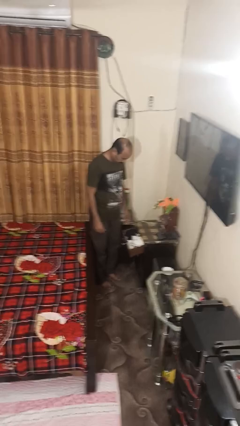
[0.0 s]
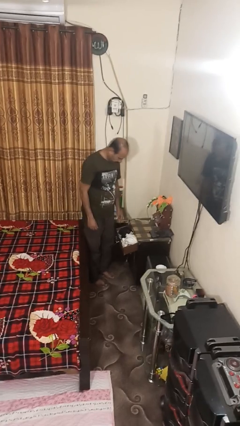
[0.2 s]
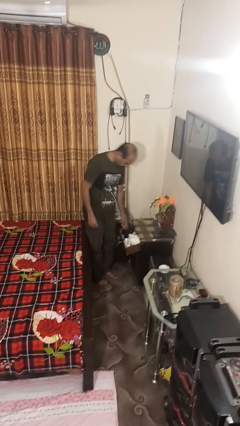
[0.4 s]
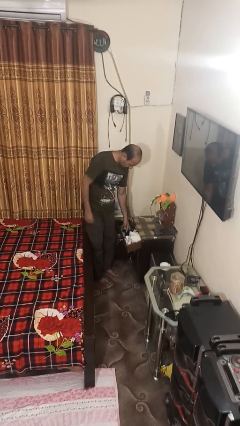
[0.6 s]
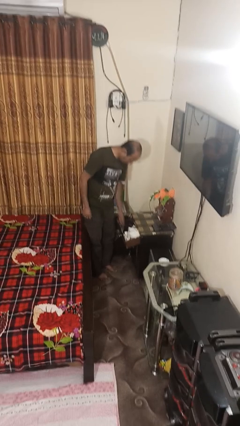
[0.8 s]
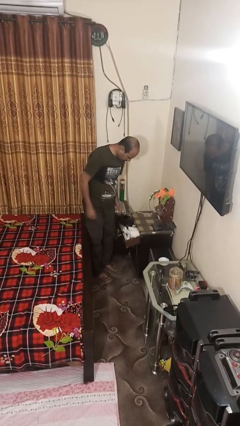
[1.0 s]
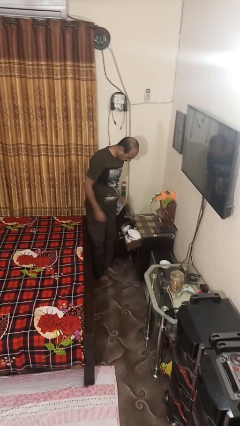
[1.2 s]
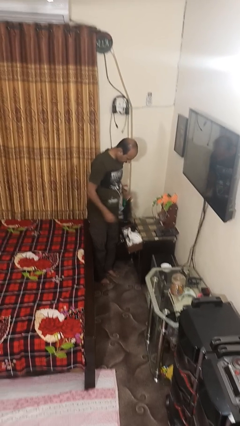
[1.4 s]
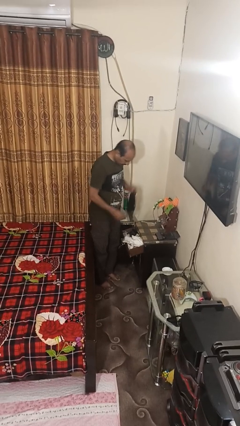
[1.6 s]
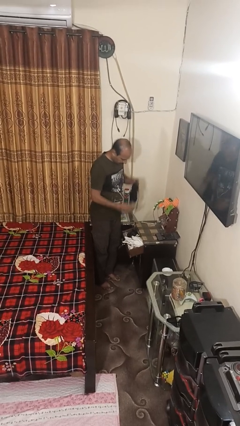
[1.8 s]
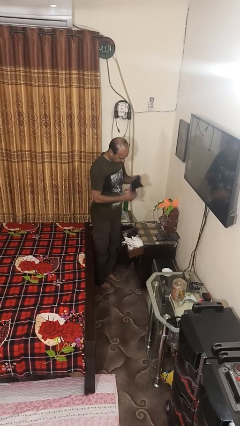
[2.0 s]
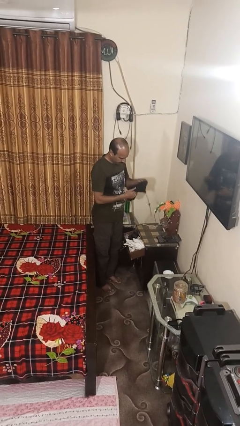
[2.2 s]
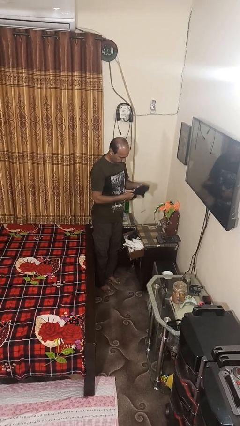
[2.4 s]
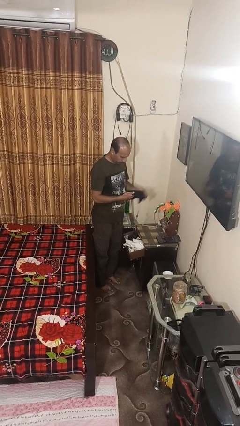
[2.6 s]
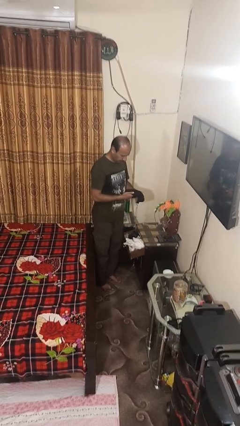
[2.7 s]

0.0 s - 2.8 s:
person takes clothes from dresser

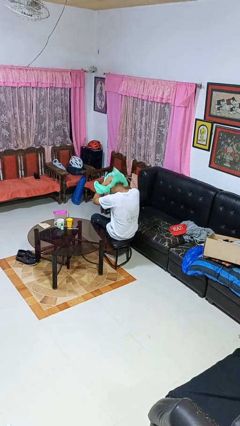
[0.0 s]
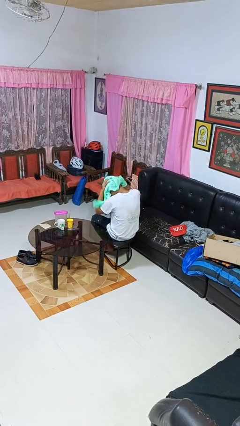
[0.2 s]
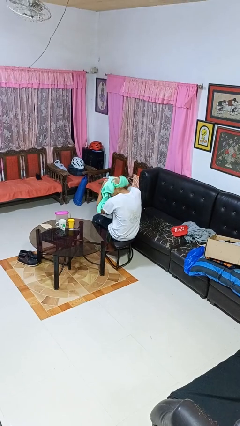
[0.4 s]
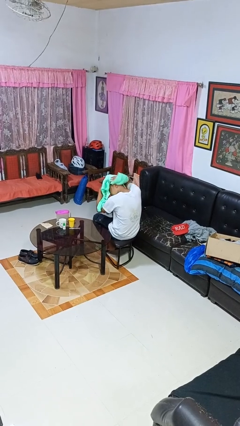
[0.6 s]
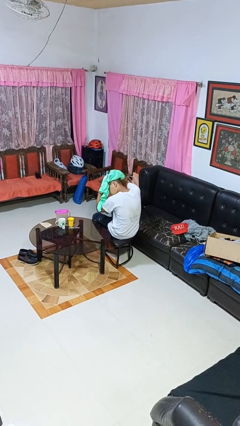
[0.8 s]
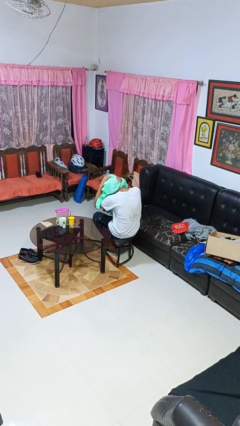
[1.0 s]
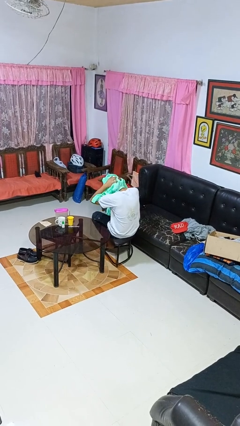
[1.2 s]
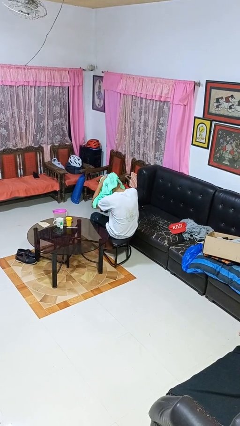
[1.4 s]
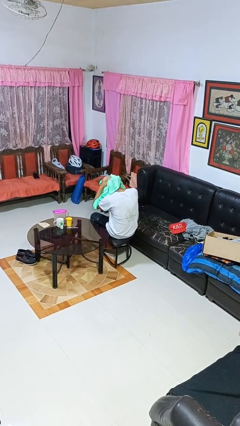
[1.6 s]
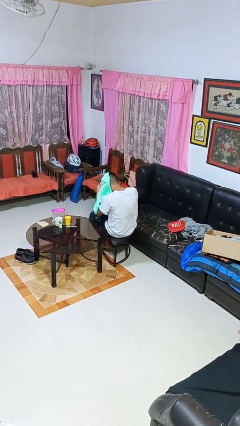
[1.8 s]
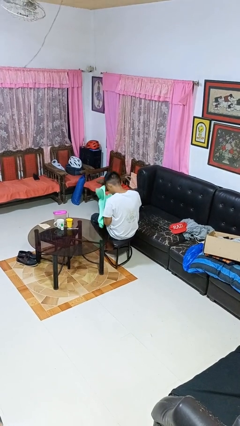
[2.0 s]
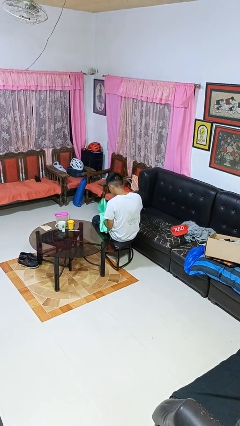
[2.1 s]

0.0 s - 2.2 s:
person dries hair with towel

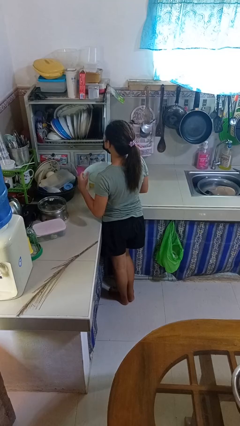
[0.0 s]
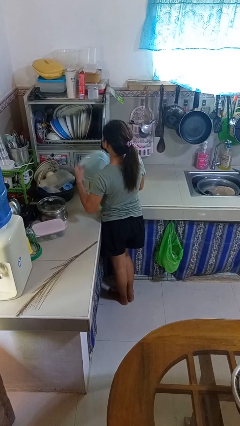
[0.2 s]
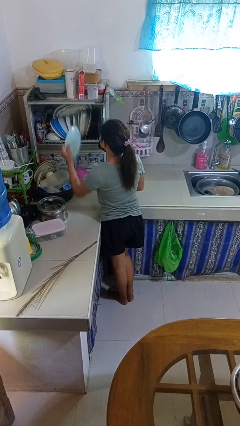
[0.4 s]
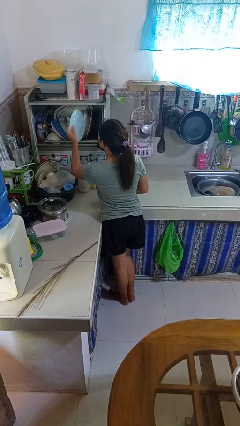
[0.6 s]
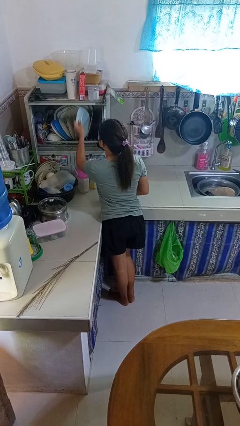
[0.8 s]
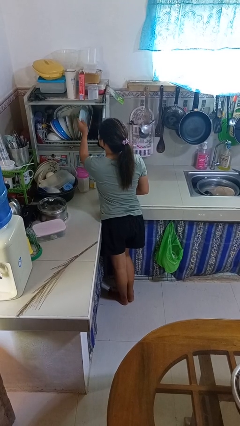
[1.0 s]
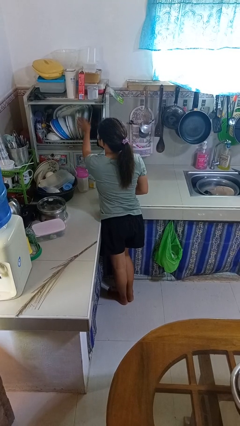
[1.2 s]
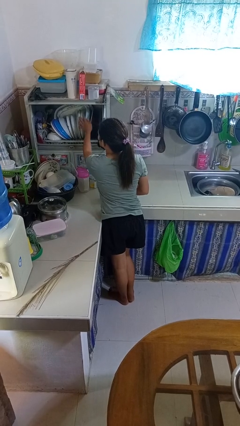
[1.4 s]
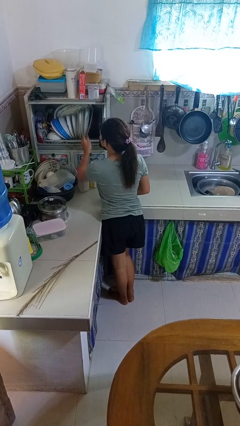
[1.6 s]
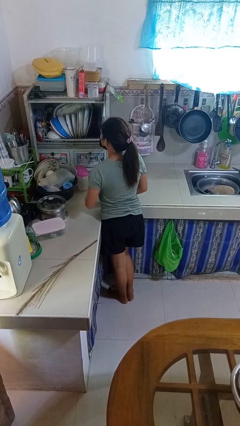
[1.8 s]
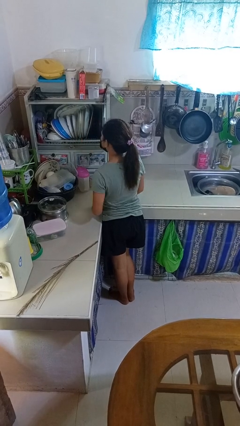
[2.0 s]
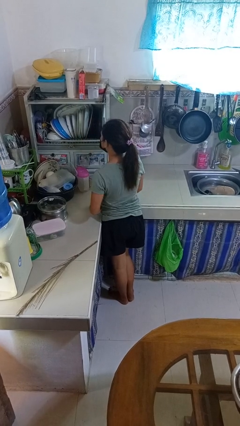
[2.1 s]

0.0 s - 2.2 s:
person puts object into kitchen drawer

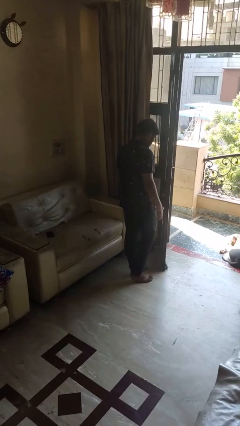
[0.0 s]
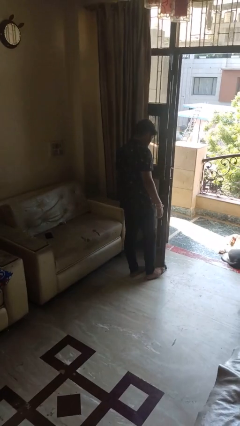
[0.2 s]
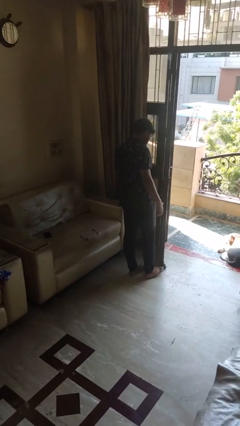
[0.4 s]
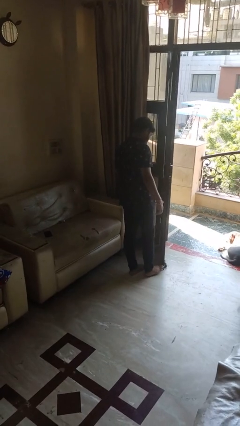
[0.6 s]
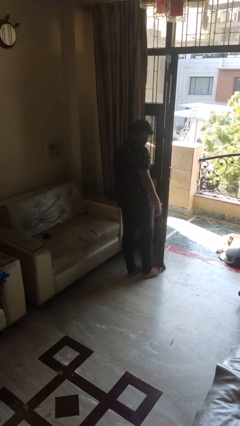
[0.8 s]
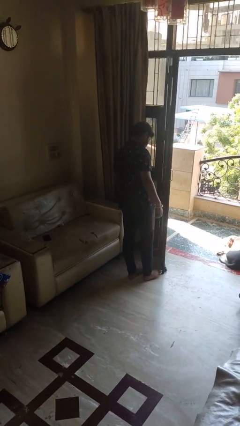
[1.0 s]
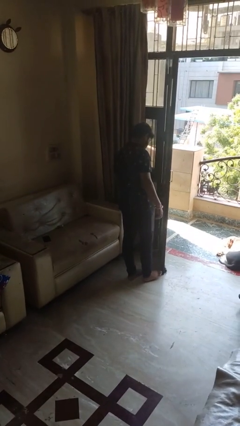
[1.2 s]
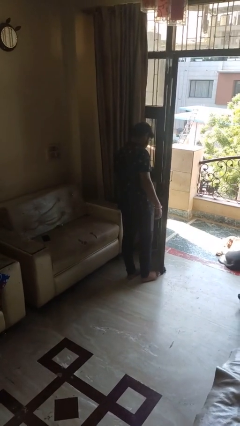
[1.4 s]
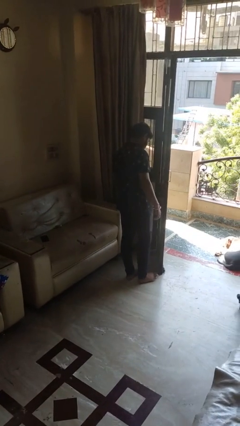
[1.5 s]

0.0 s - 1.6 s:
person stubs toe

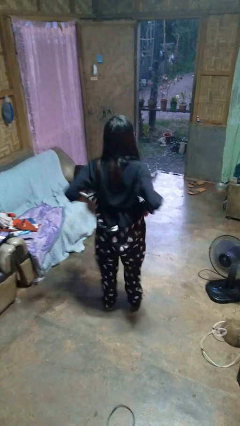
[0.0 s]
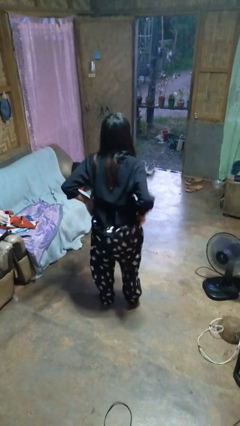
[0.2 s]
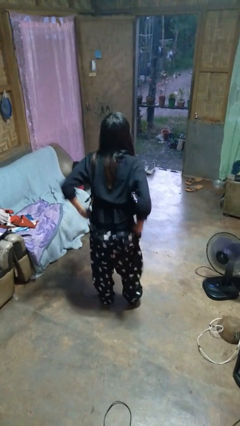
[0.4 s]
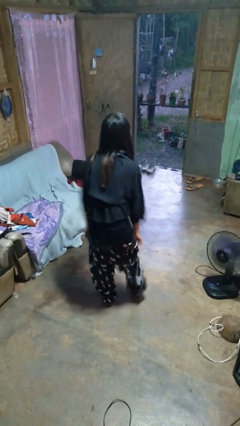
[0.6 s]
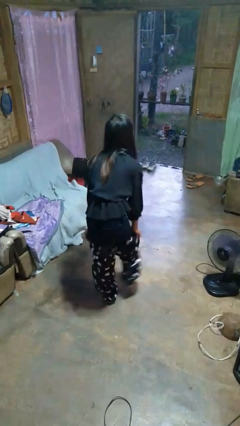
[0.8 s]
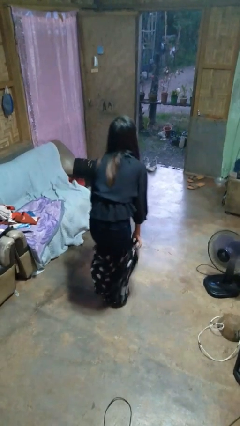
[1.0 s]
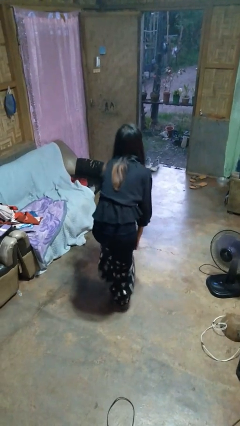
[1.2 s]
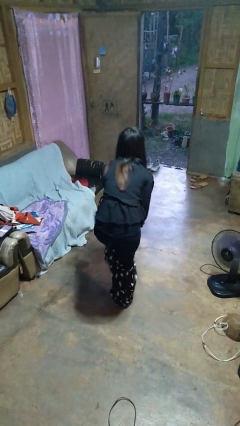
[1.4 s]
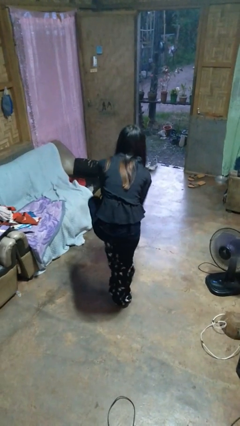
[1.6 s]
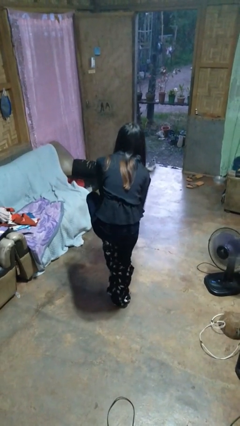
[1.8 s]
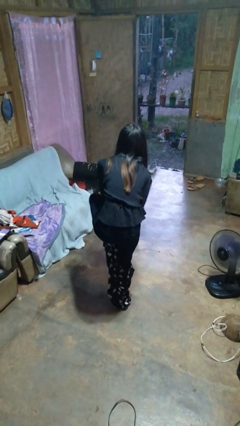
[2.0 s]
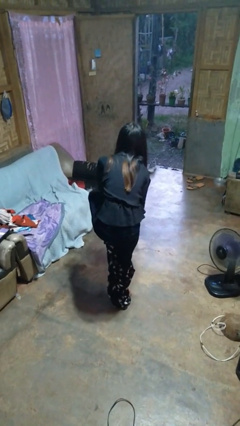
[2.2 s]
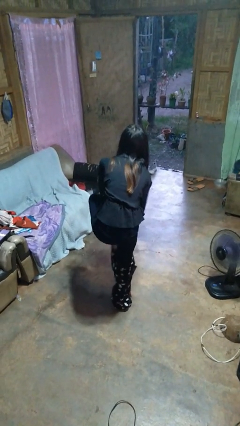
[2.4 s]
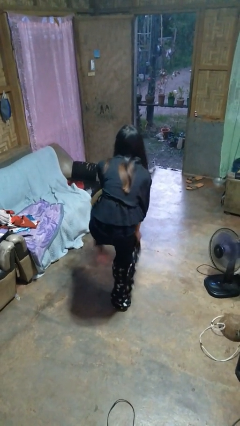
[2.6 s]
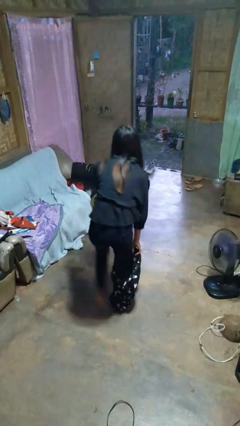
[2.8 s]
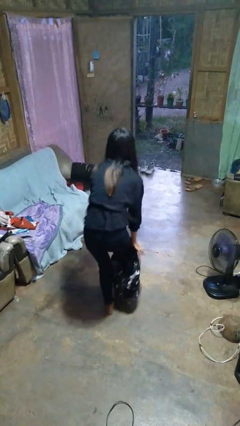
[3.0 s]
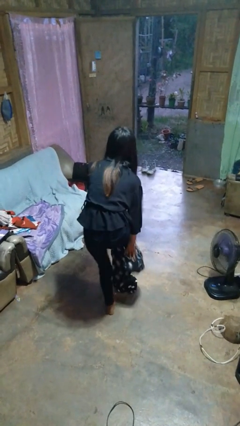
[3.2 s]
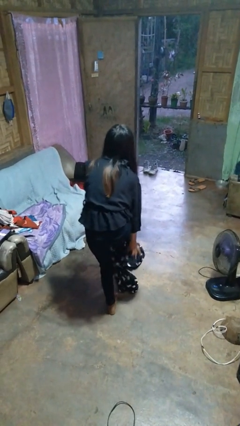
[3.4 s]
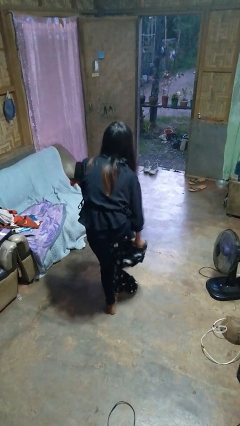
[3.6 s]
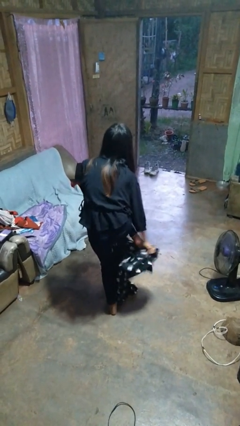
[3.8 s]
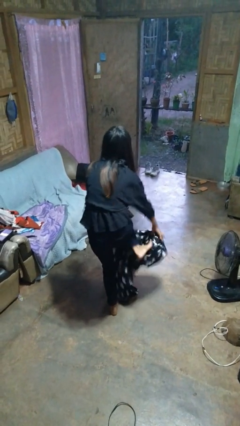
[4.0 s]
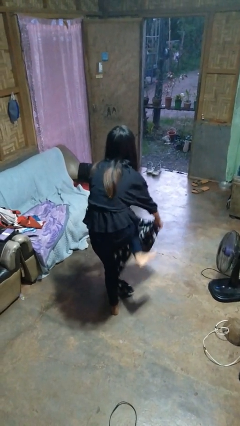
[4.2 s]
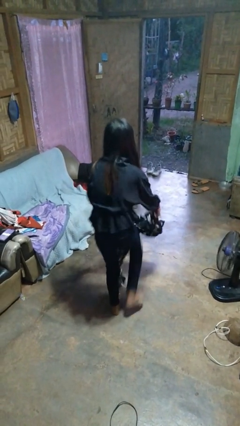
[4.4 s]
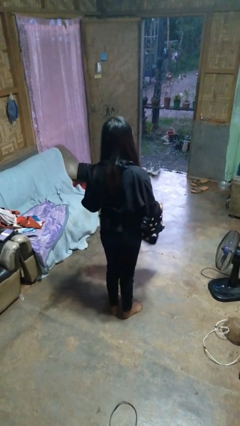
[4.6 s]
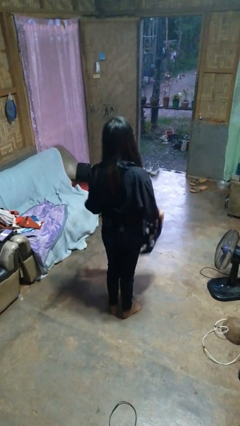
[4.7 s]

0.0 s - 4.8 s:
person takes off pants

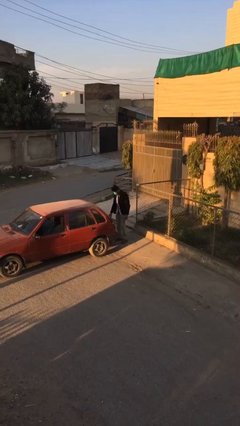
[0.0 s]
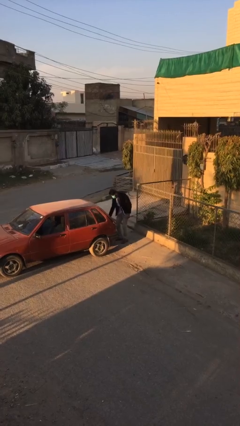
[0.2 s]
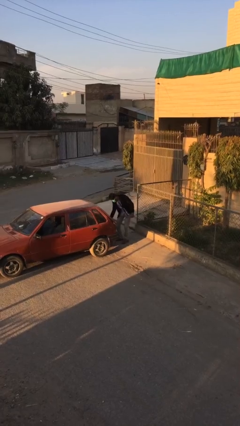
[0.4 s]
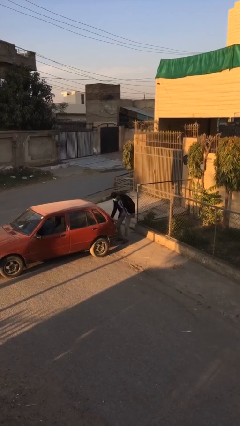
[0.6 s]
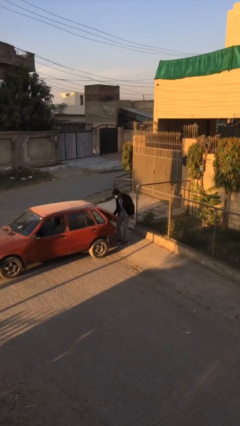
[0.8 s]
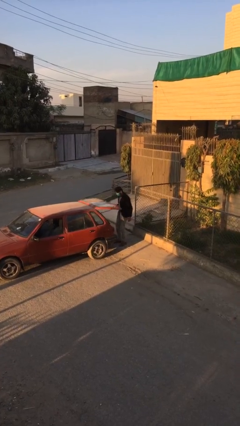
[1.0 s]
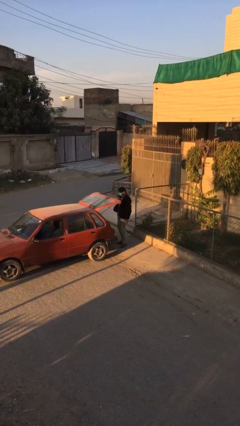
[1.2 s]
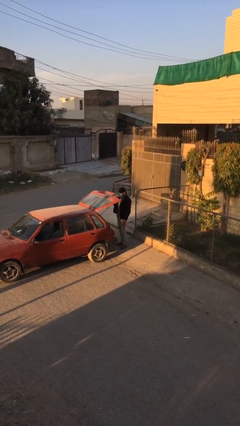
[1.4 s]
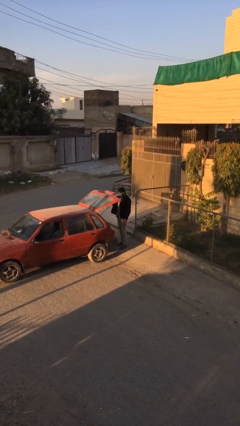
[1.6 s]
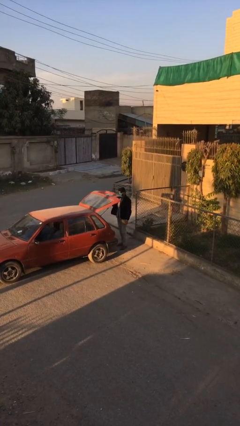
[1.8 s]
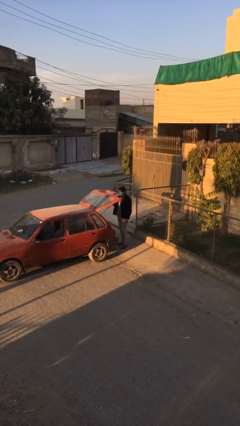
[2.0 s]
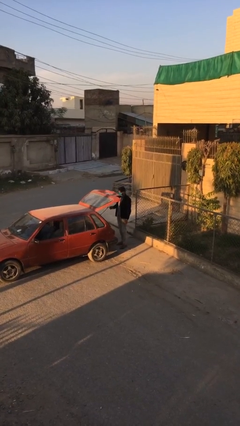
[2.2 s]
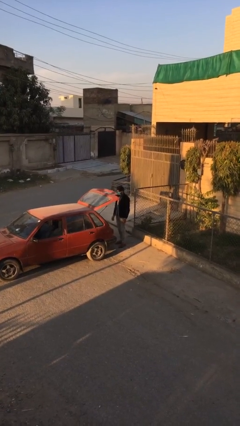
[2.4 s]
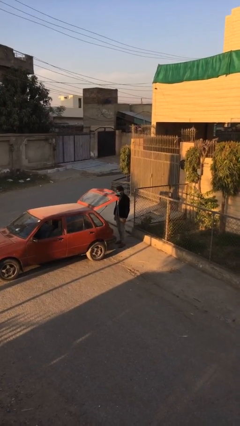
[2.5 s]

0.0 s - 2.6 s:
person opens car trunk

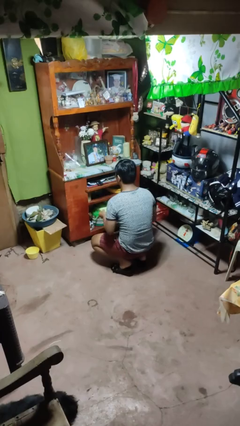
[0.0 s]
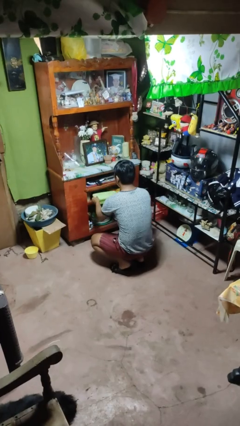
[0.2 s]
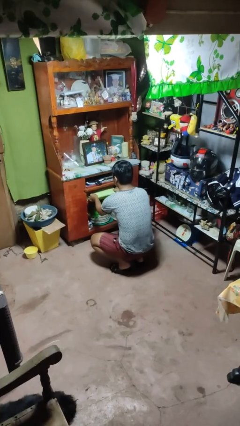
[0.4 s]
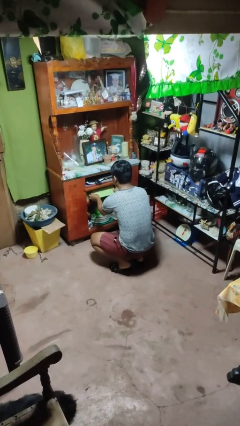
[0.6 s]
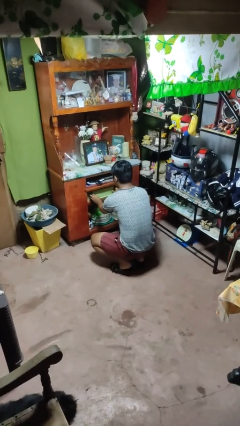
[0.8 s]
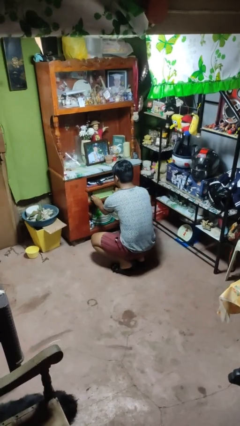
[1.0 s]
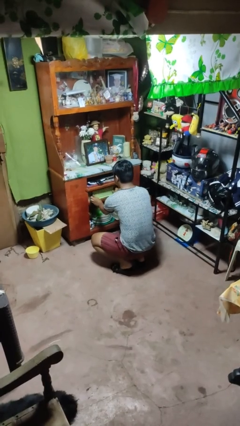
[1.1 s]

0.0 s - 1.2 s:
person puts down object into cabinet
